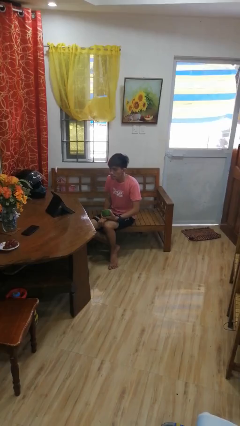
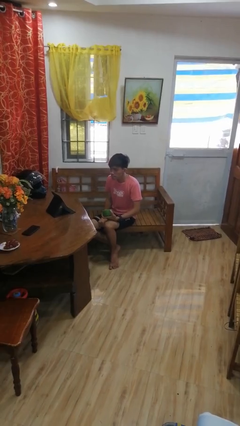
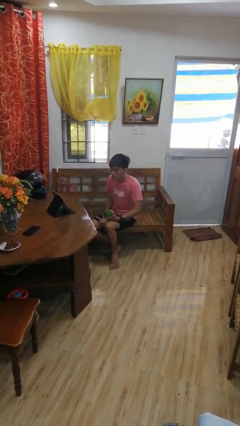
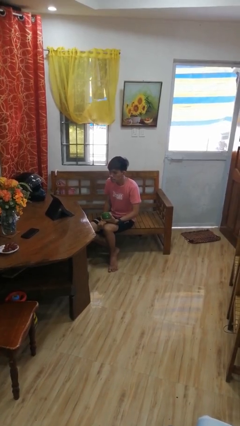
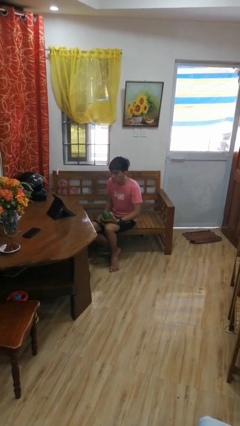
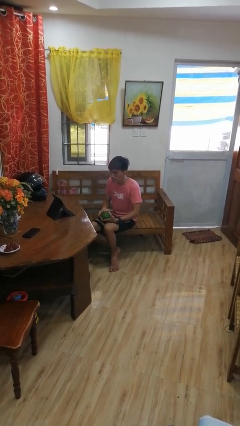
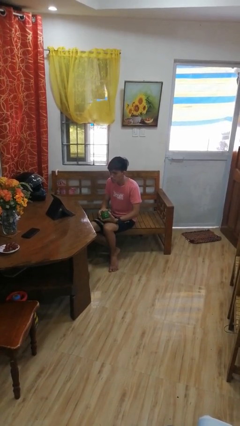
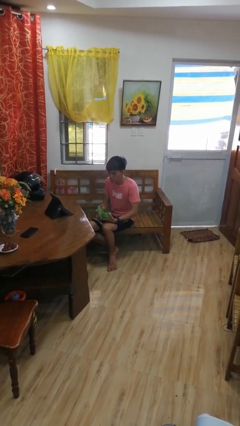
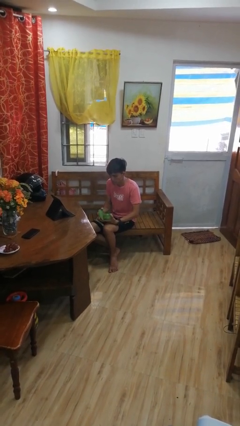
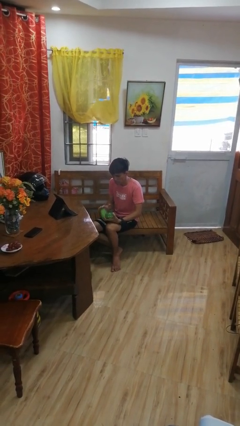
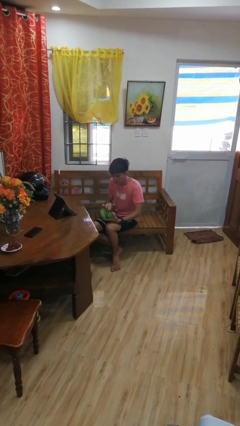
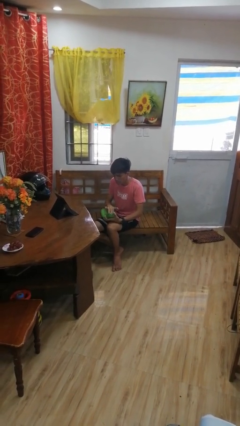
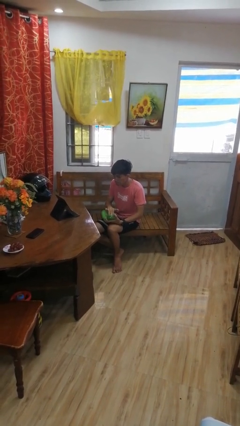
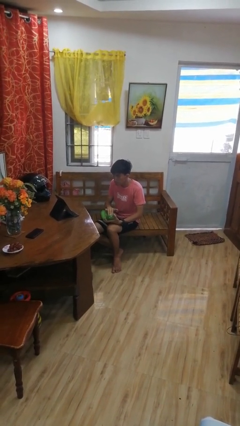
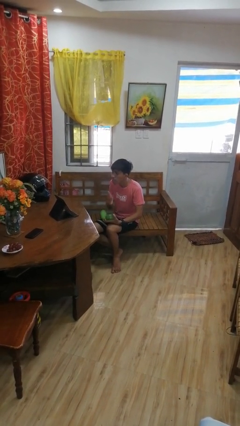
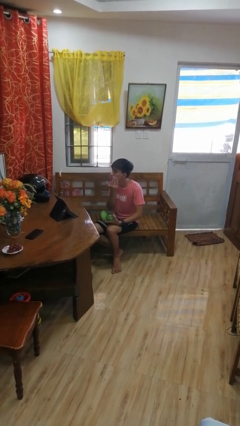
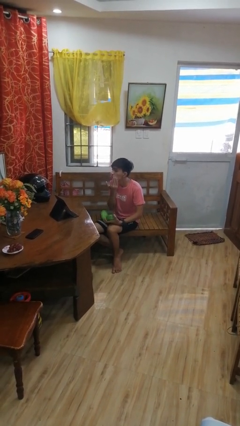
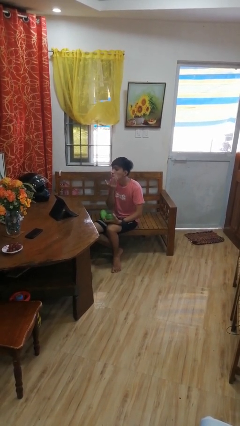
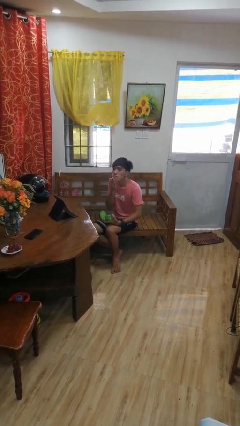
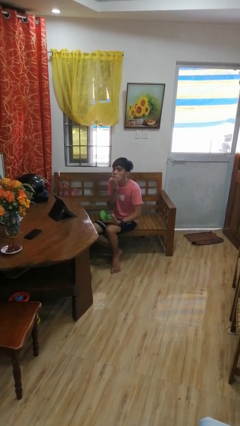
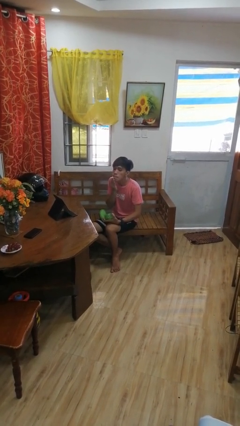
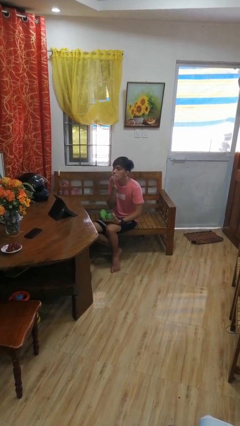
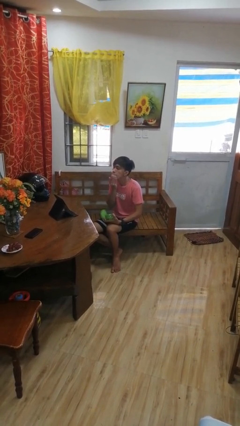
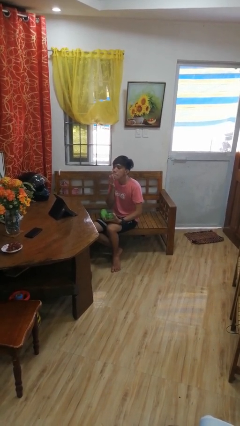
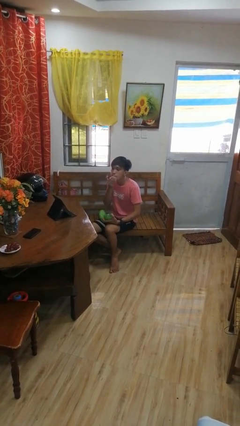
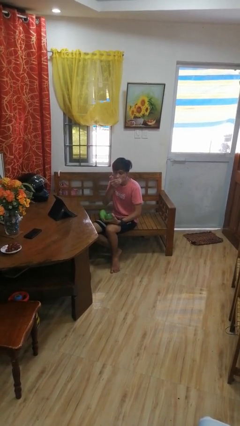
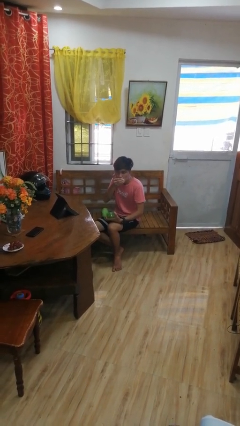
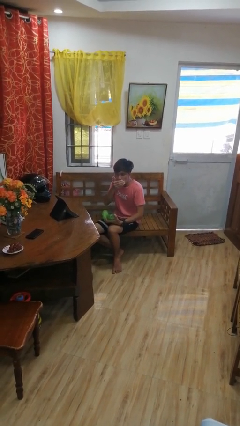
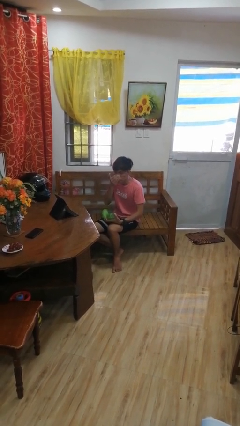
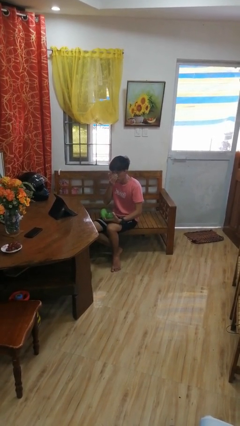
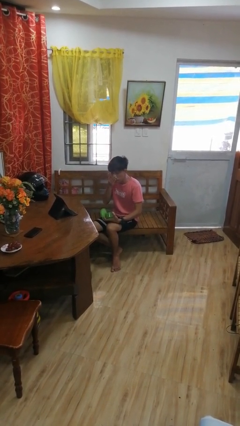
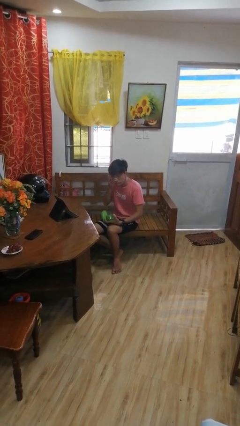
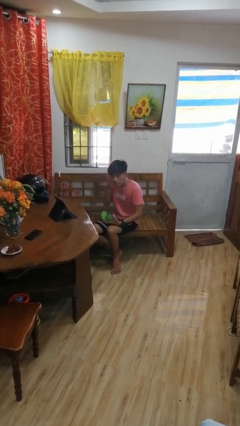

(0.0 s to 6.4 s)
person applies facial moisturizer

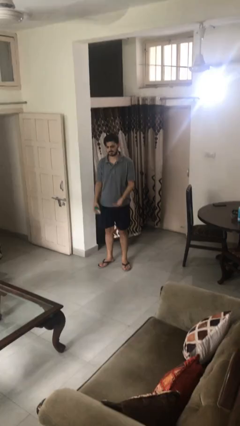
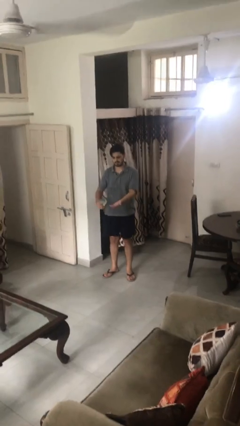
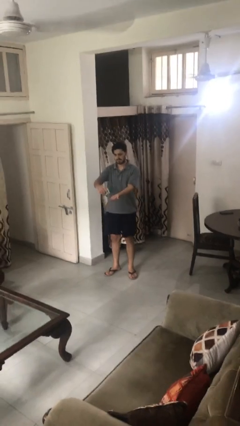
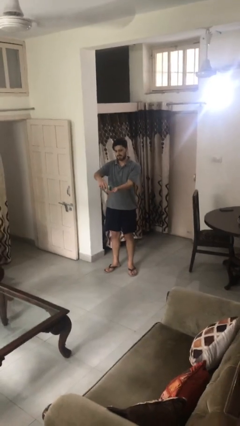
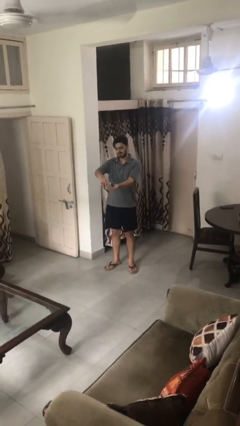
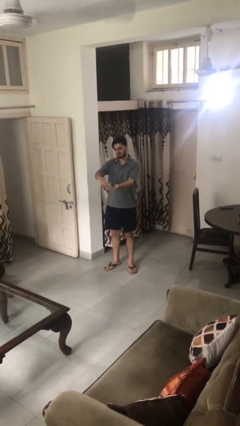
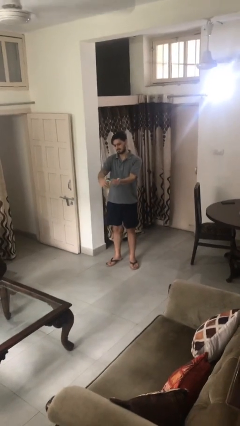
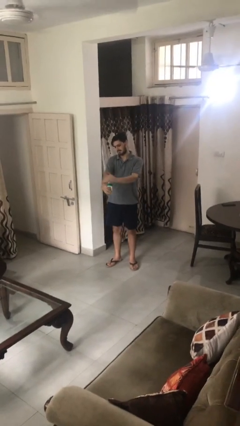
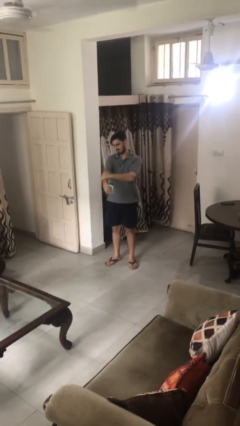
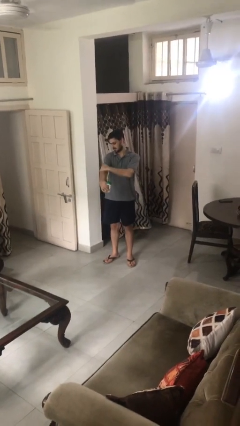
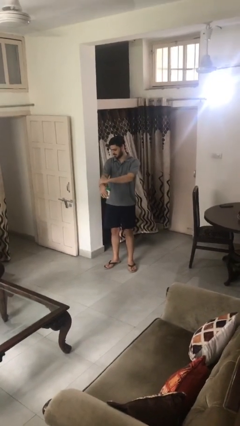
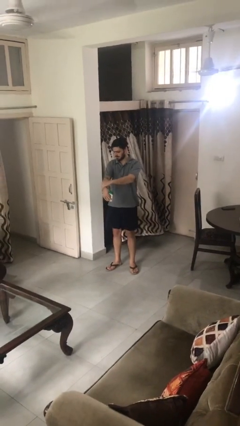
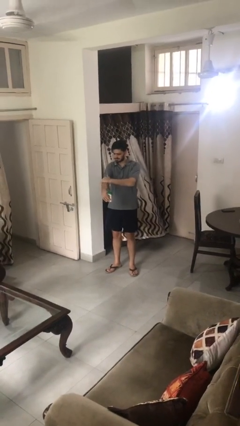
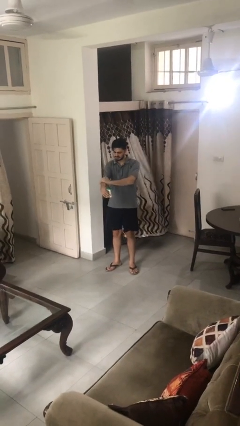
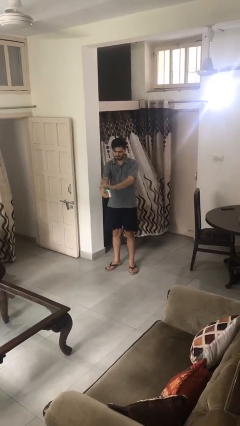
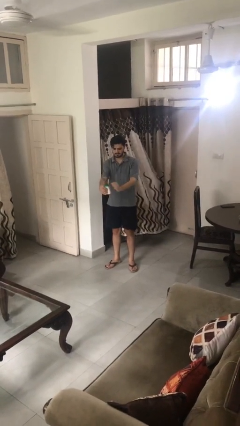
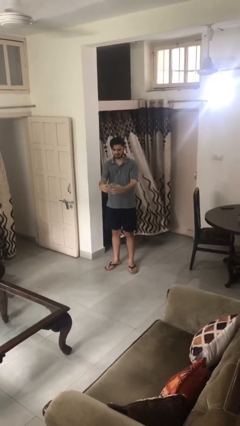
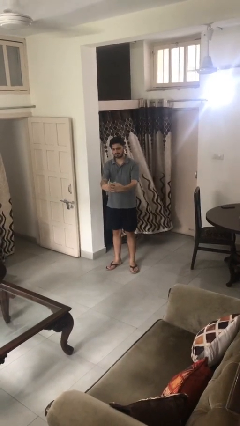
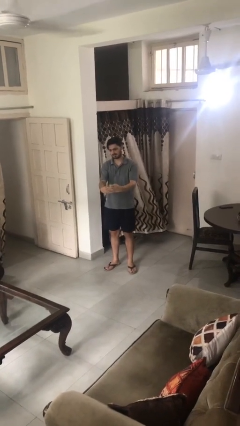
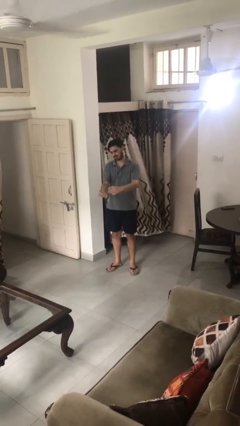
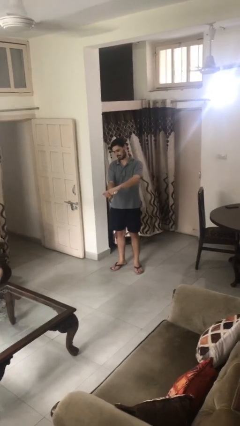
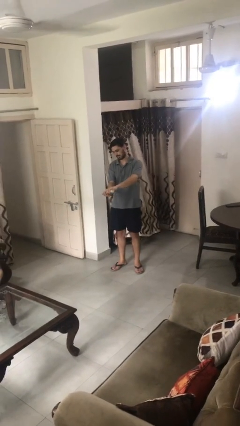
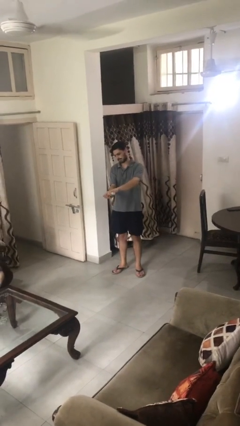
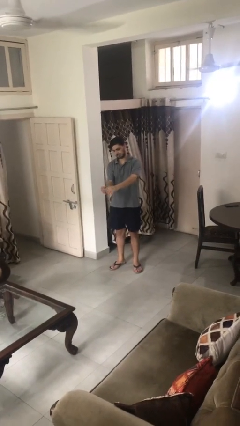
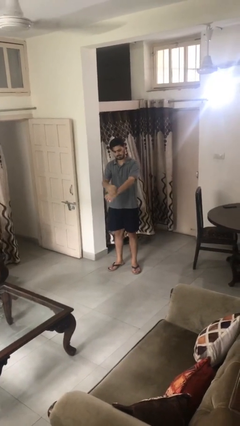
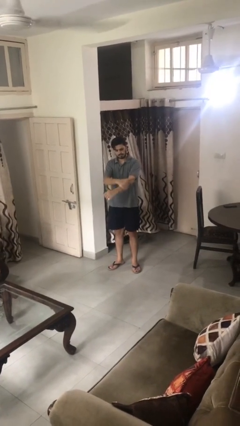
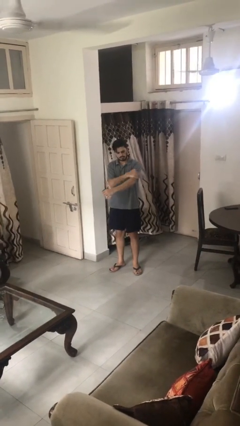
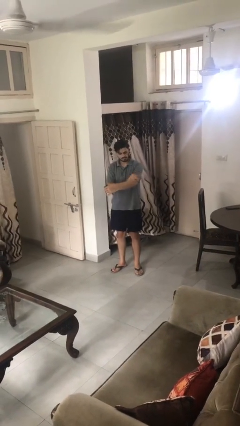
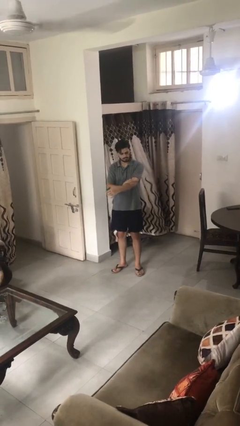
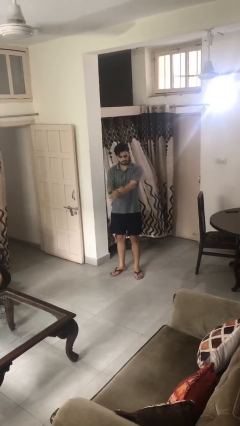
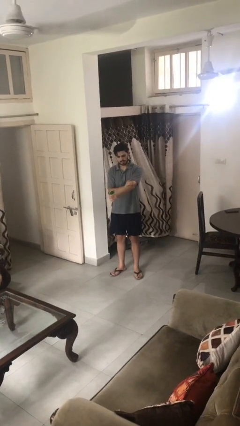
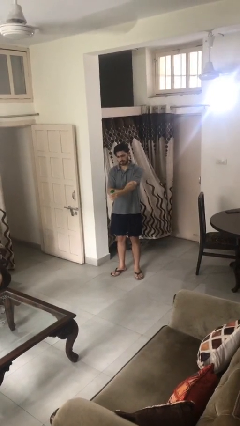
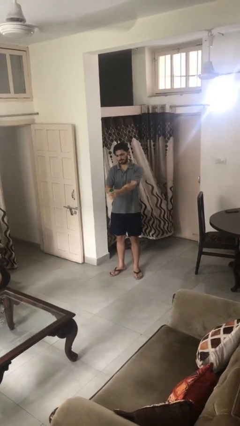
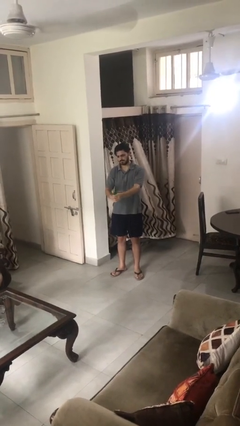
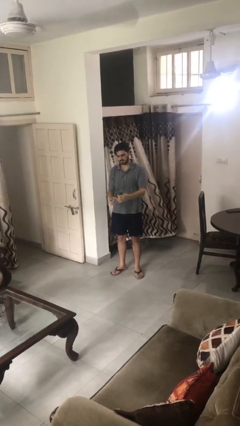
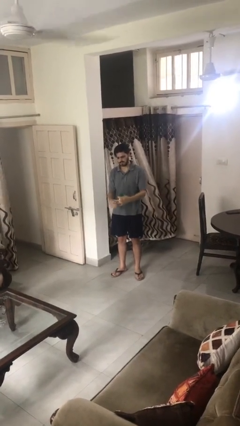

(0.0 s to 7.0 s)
person applies sunscreen

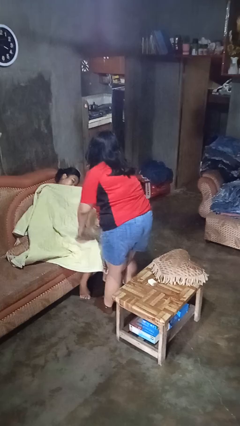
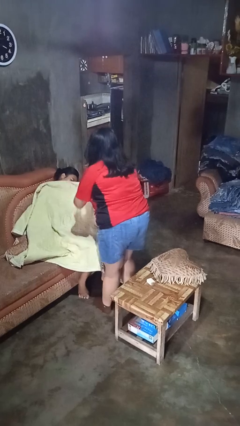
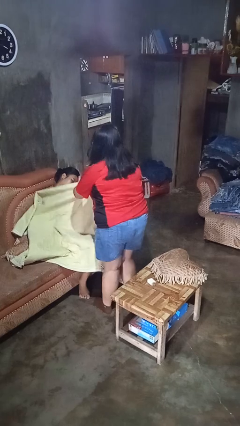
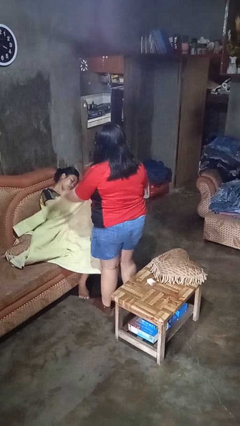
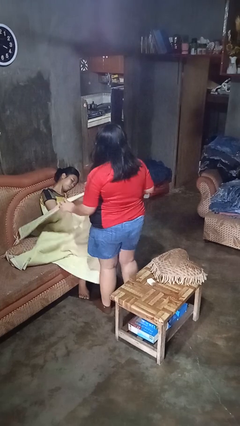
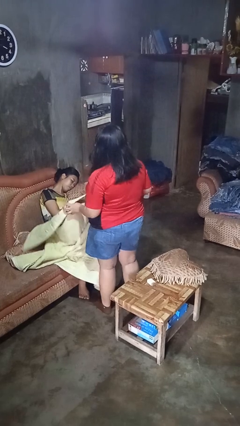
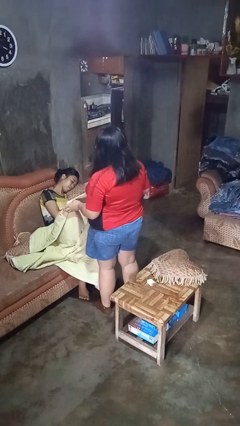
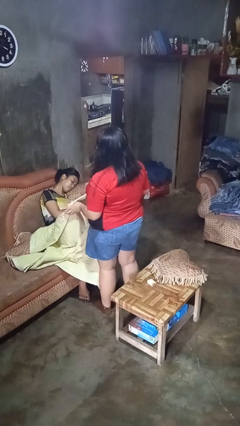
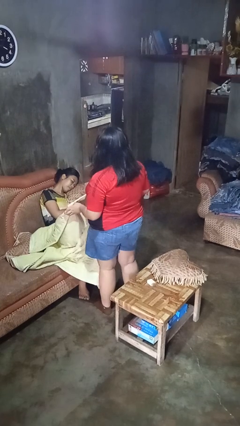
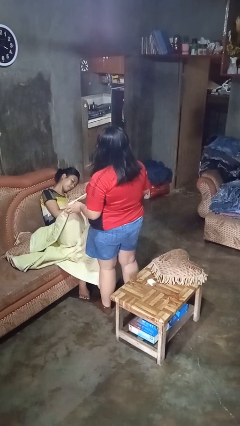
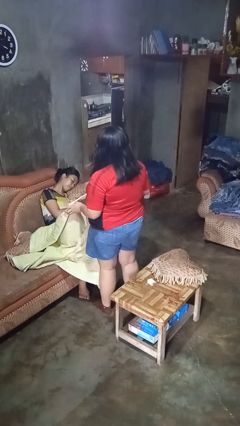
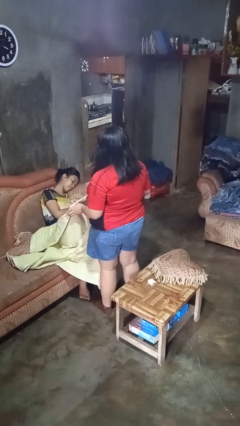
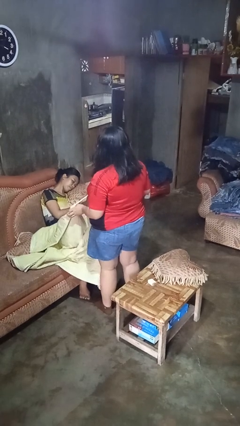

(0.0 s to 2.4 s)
person uncovers friend with blanket

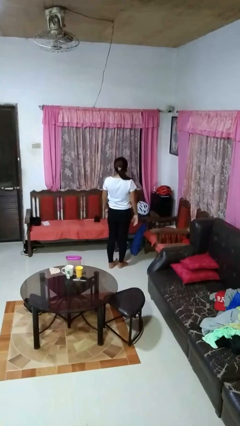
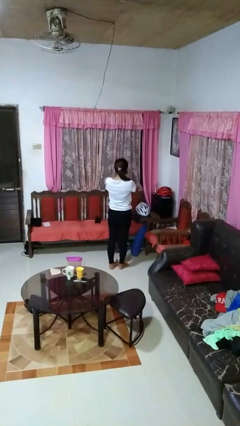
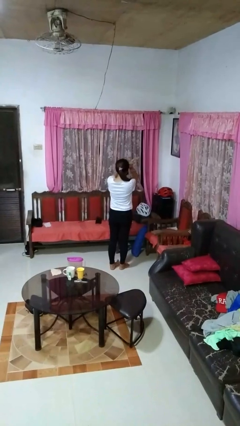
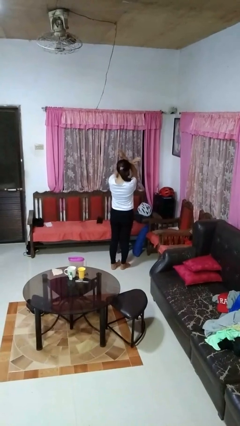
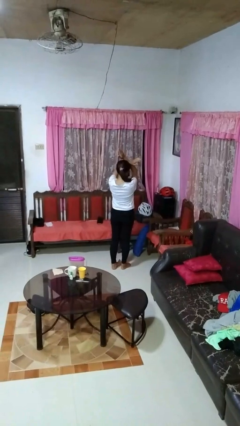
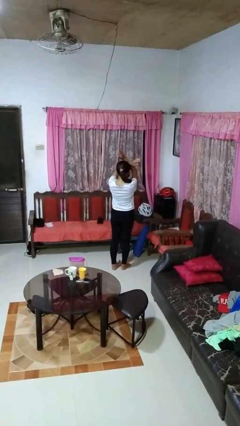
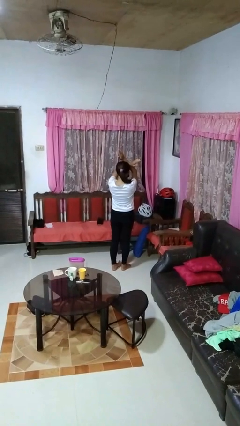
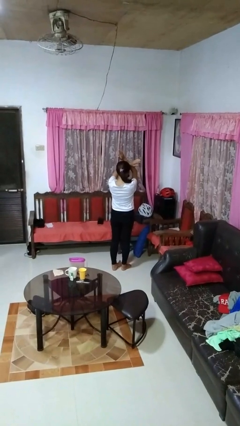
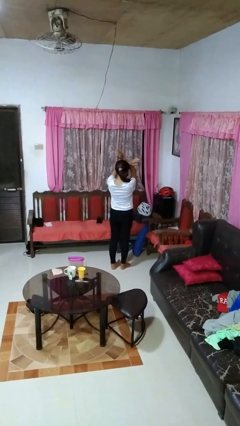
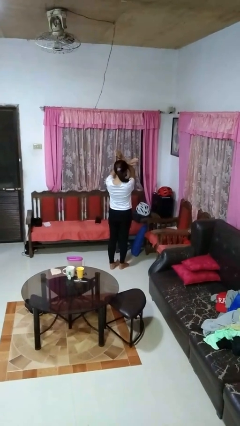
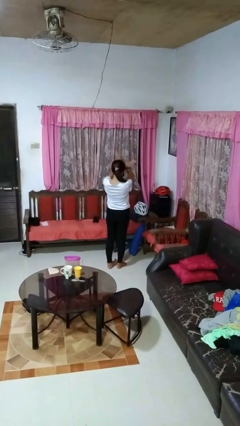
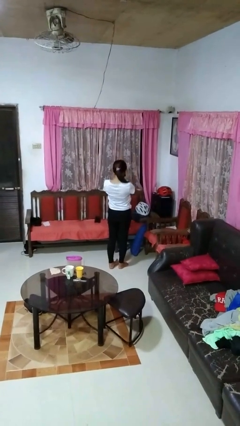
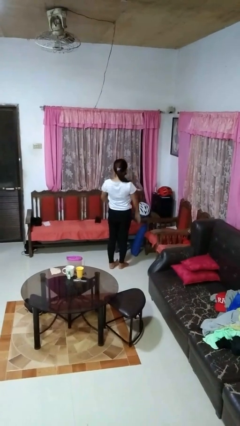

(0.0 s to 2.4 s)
person gestures arms x
